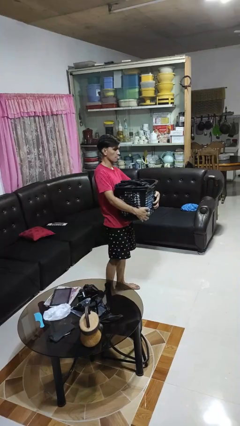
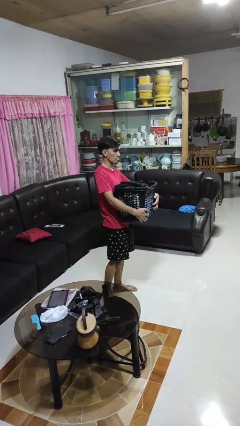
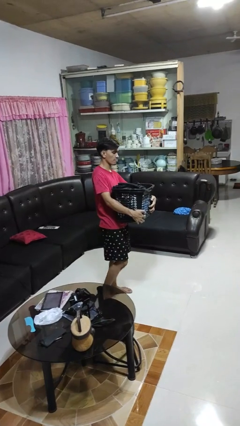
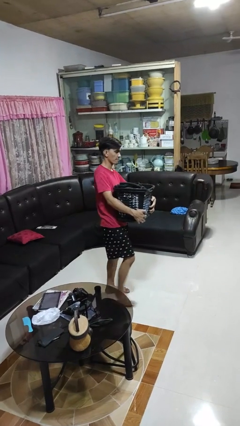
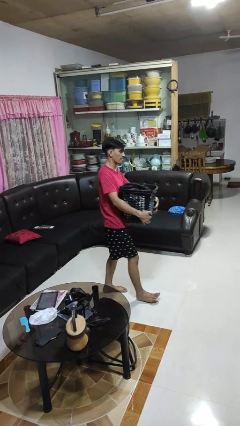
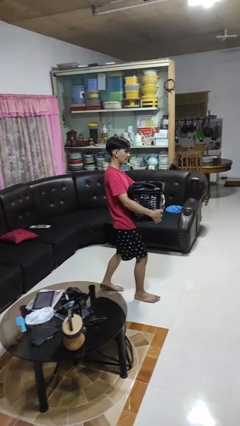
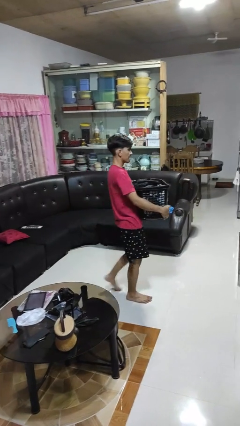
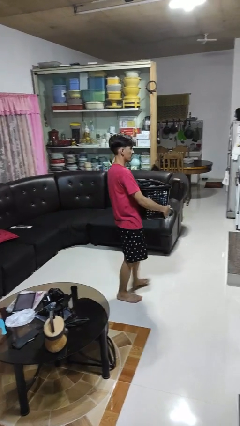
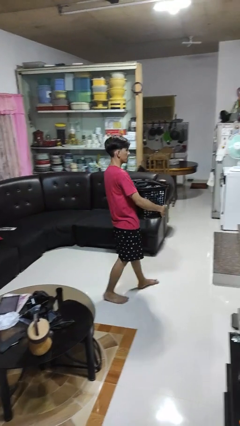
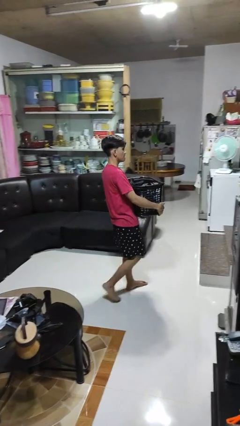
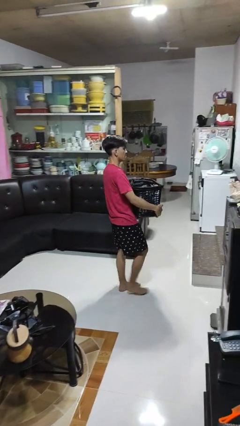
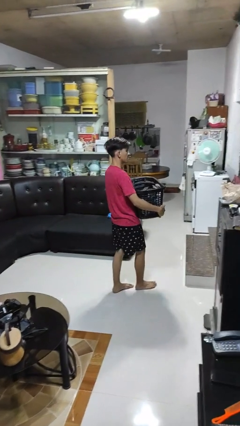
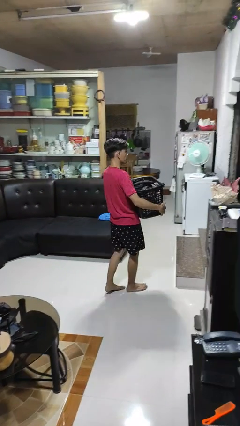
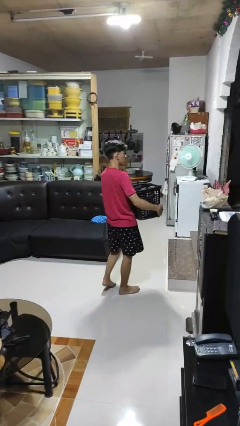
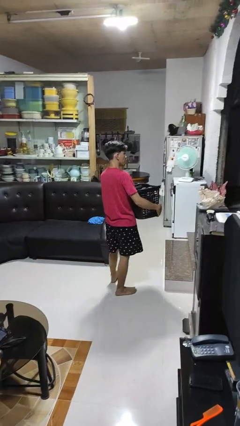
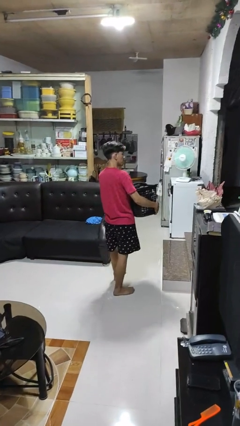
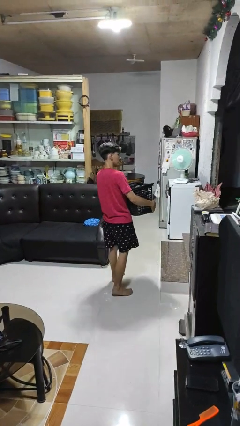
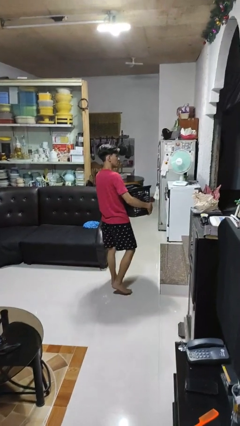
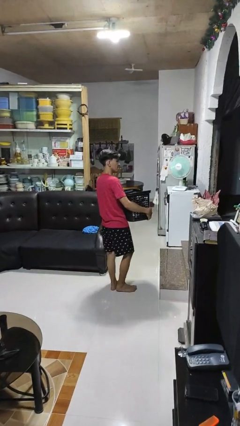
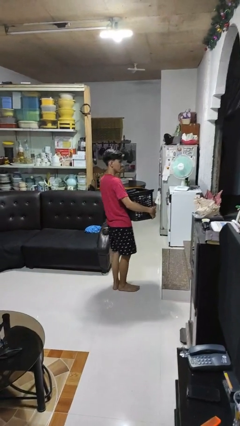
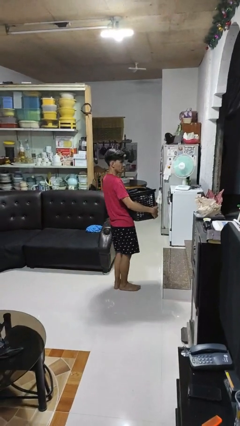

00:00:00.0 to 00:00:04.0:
person carries laundry basket

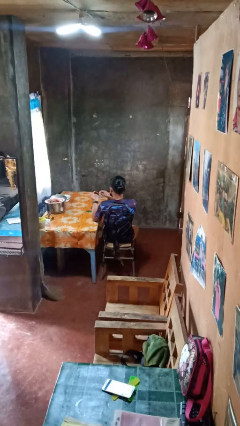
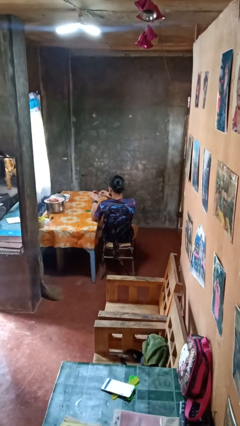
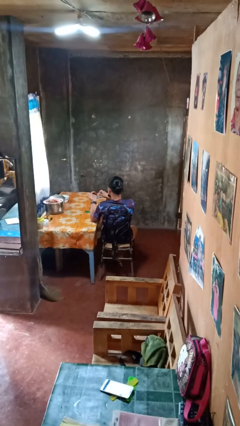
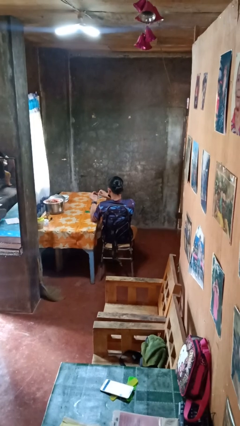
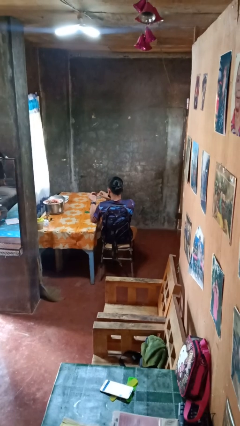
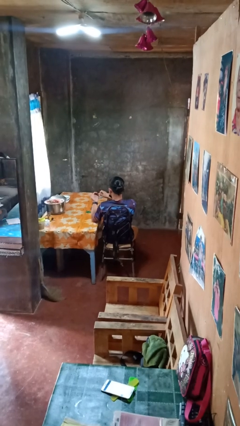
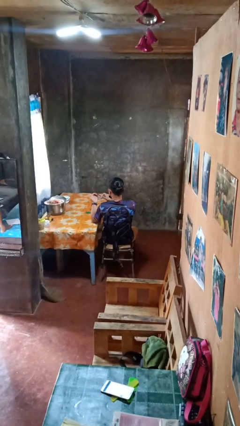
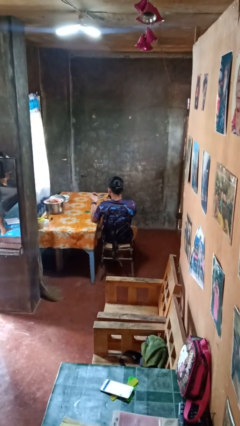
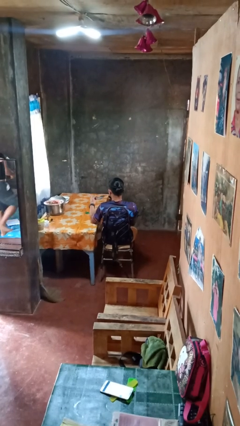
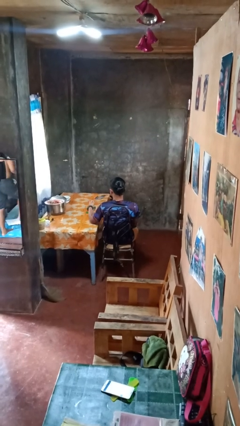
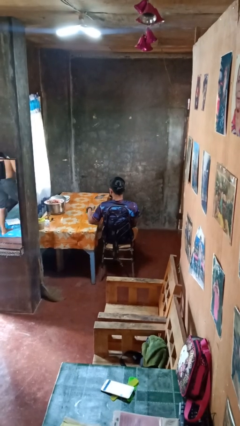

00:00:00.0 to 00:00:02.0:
person files fingernails

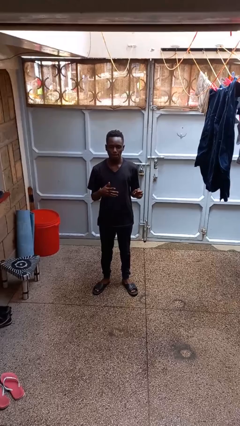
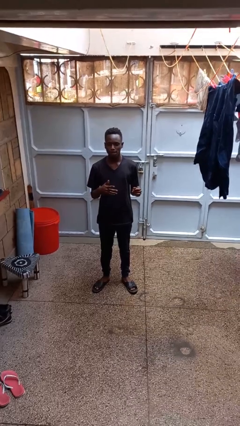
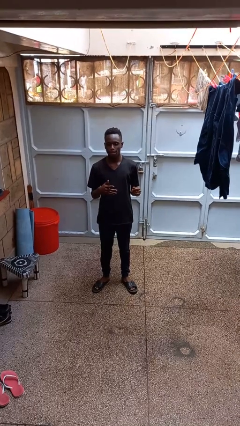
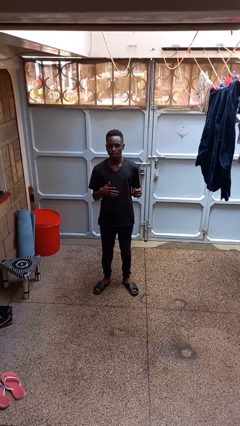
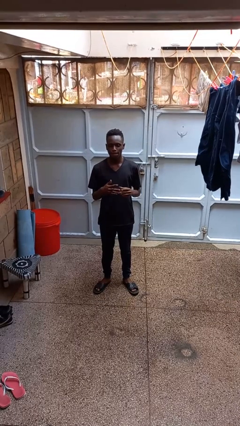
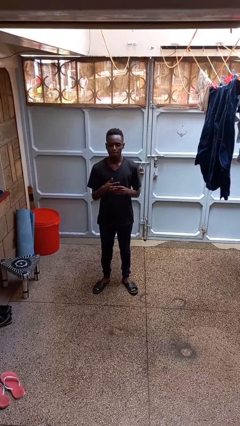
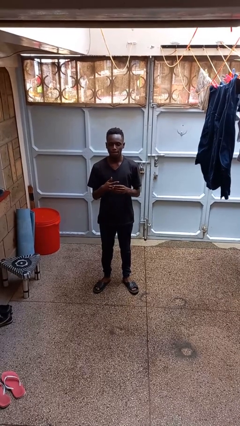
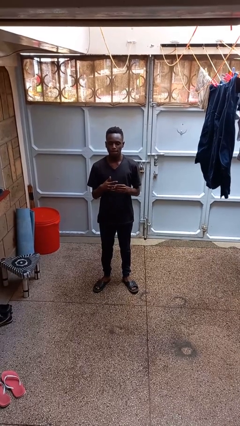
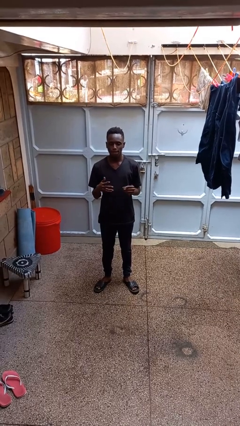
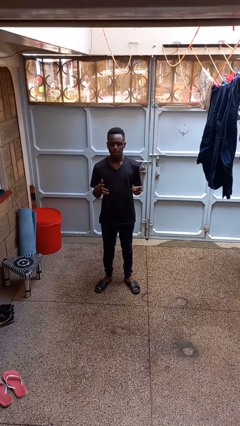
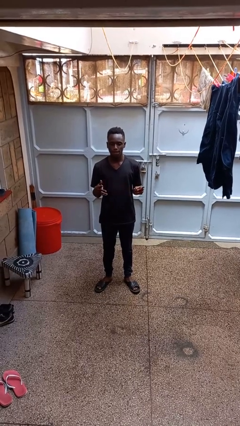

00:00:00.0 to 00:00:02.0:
person takes off ring

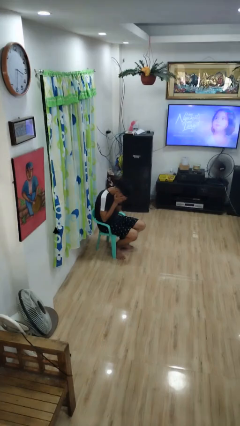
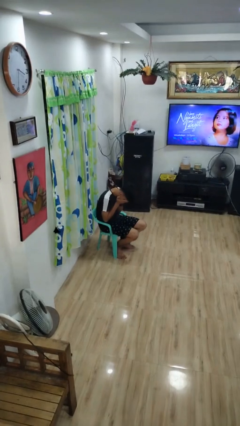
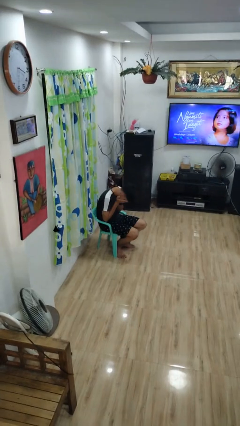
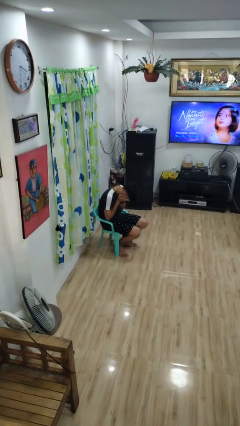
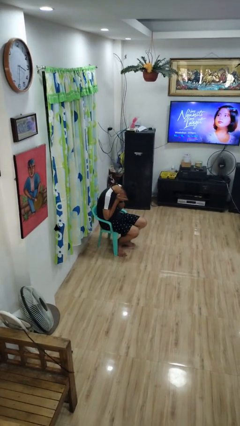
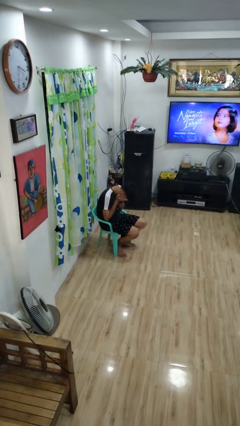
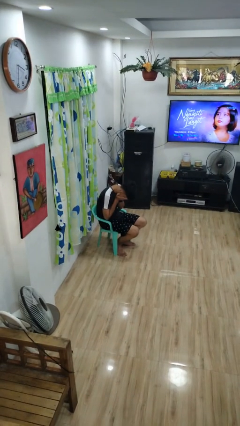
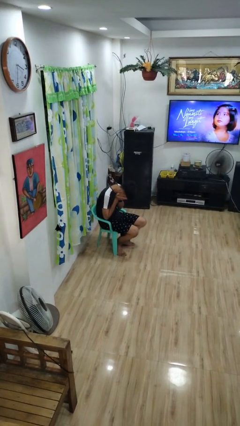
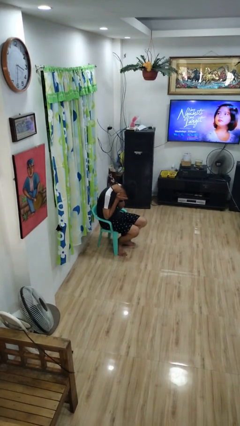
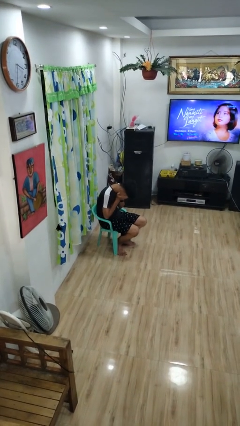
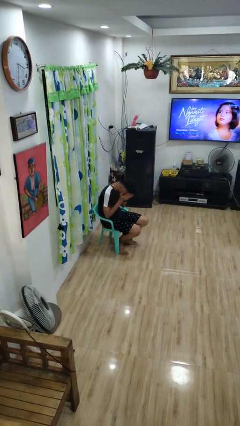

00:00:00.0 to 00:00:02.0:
person covers face with hands

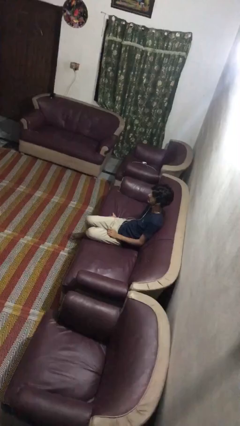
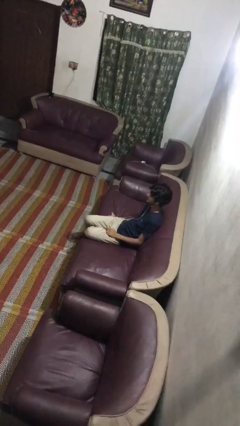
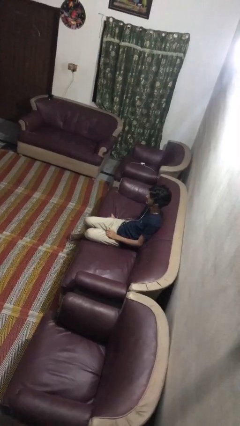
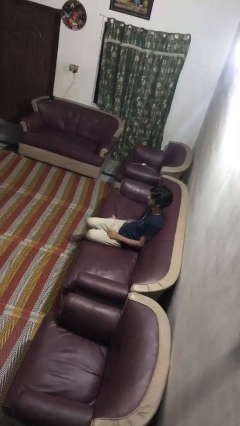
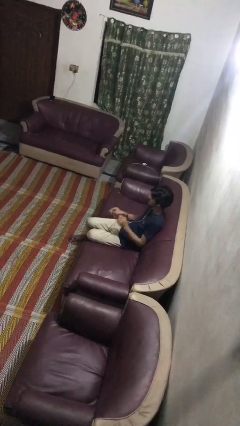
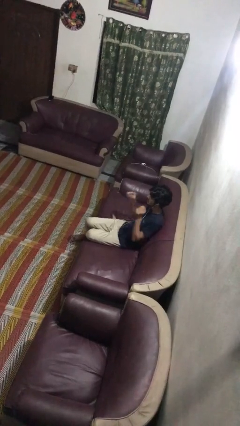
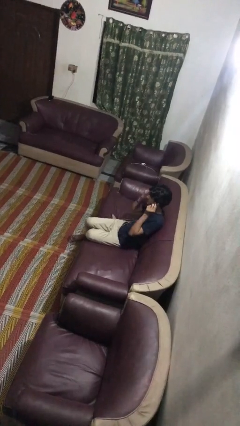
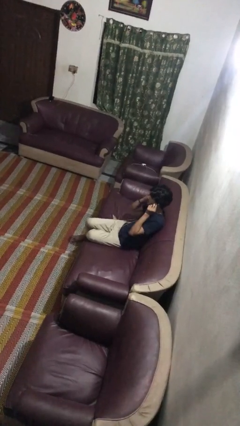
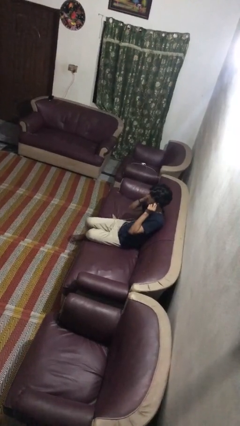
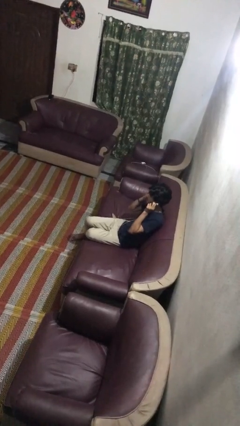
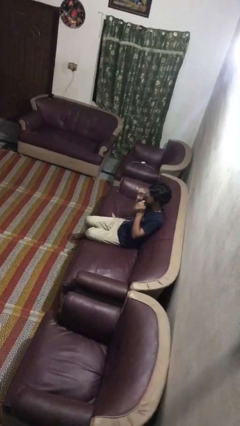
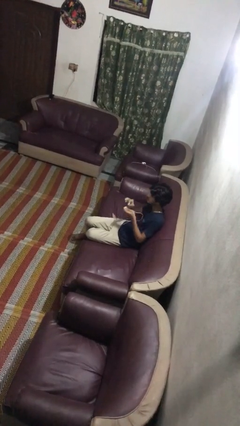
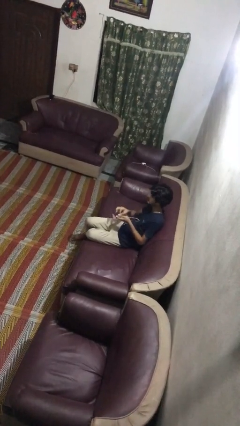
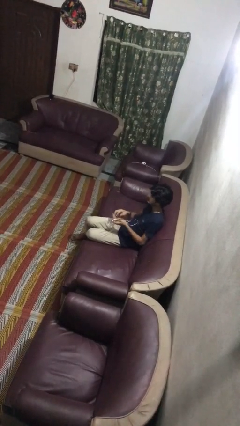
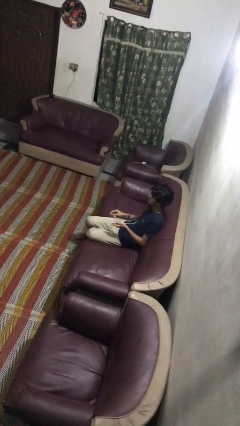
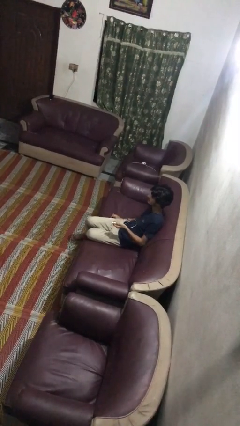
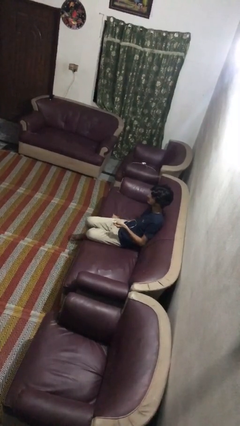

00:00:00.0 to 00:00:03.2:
person takes off headphones

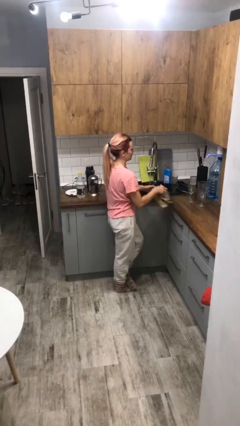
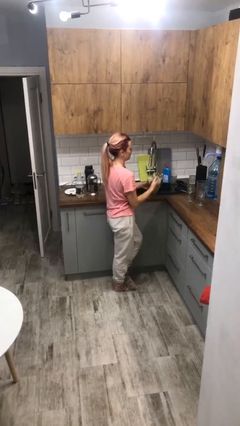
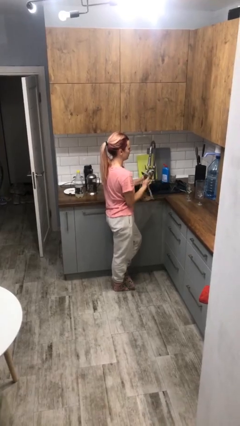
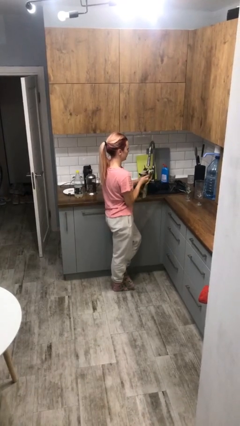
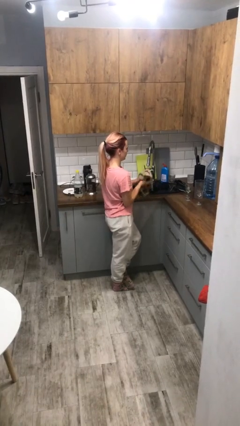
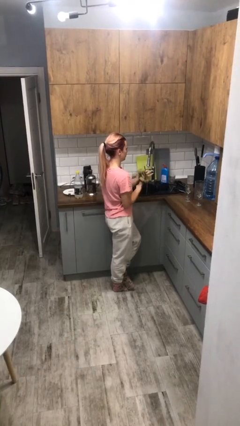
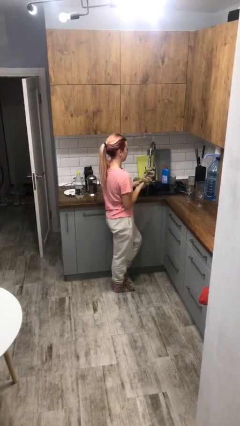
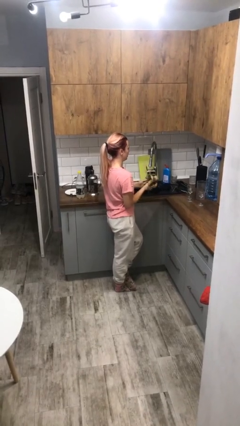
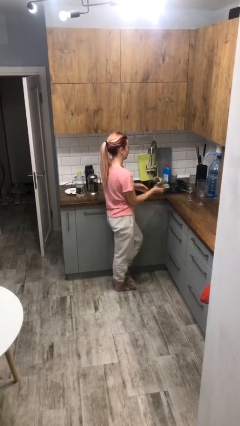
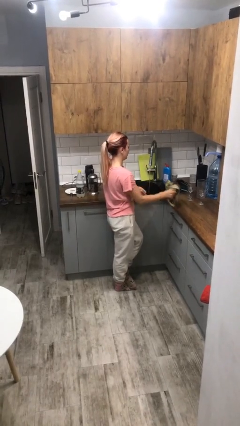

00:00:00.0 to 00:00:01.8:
person dries hands with towel

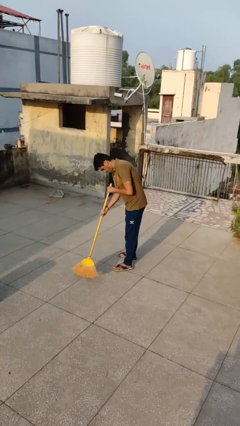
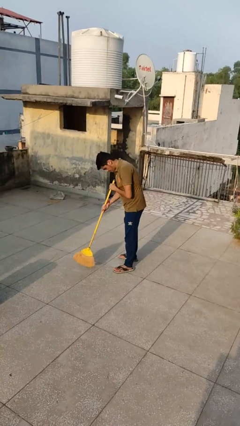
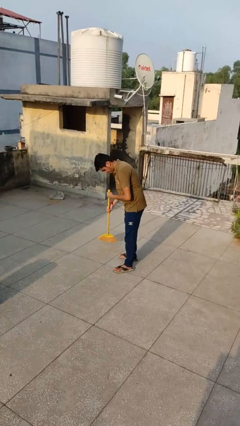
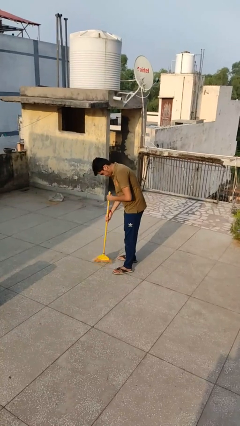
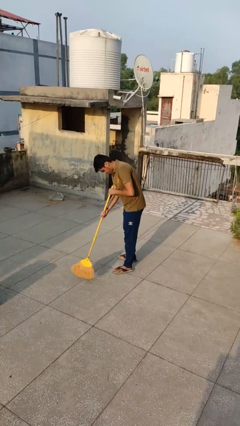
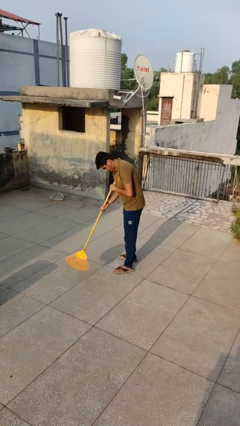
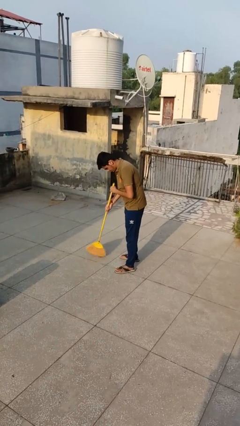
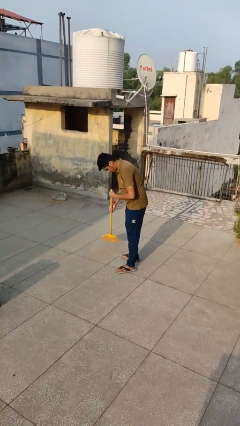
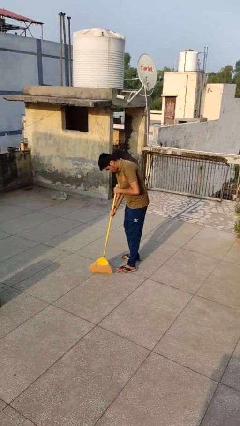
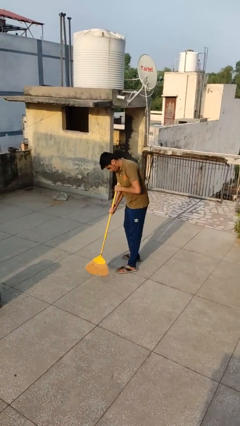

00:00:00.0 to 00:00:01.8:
person sweeps floor

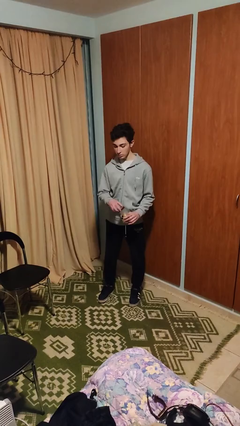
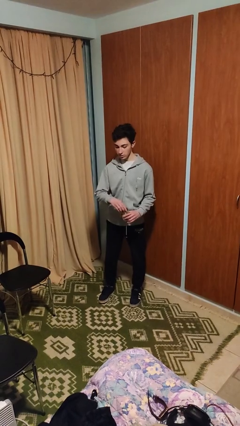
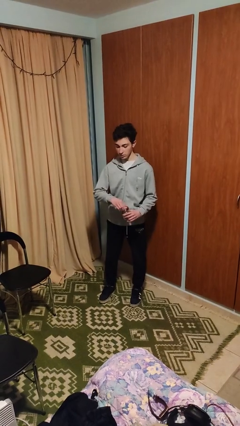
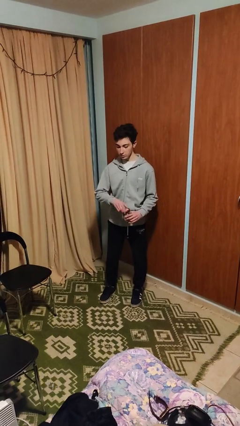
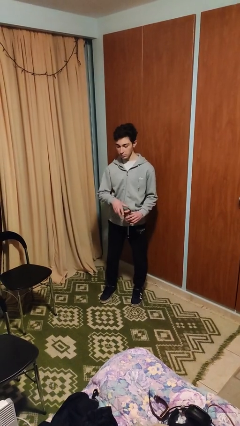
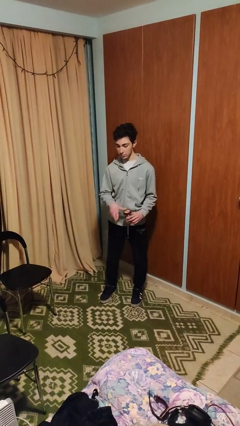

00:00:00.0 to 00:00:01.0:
person closes jar
